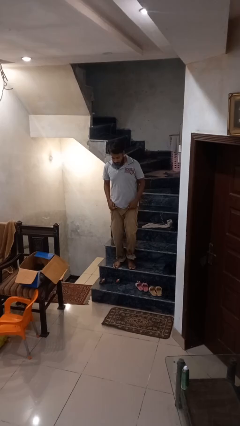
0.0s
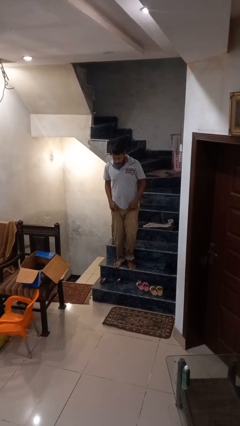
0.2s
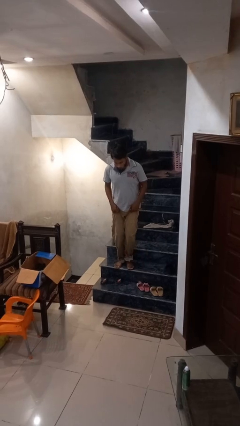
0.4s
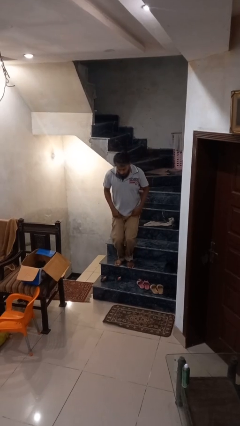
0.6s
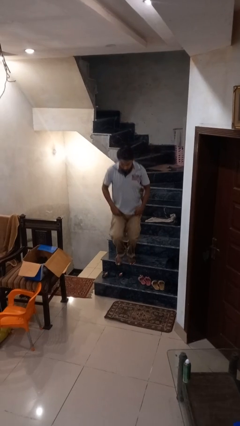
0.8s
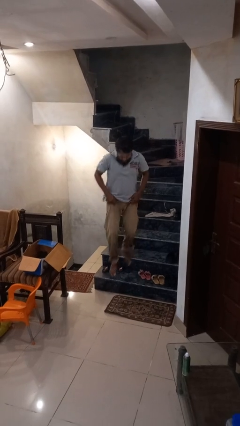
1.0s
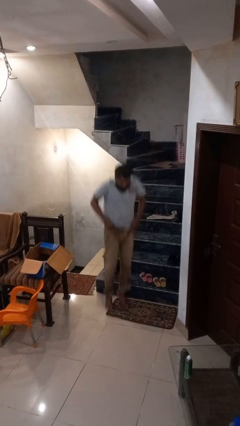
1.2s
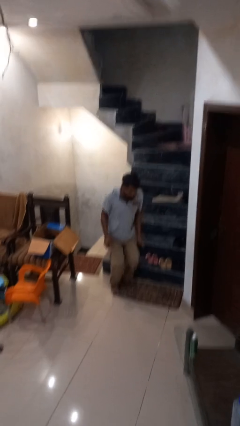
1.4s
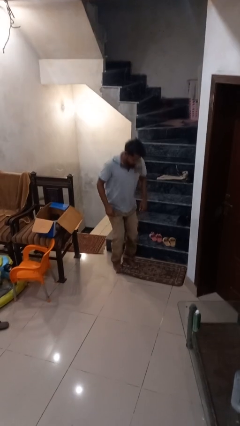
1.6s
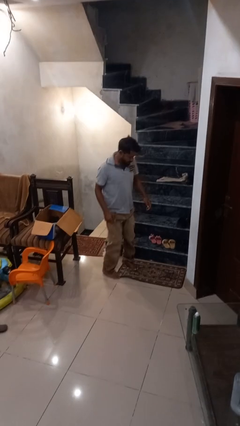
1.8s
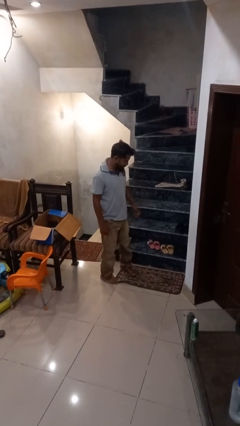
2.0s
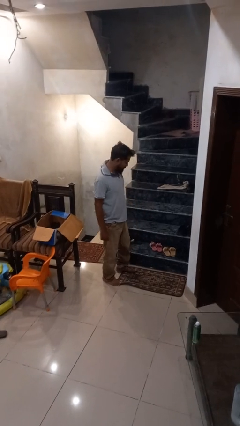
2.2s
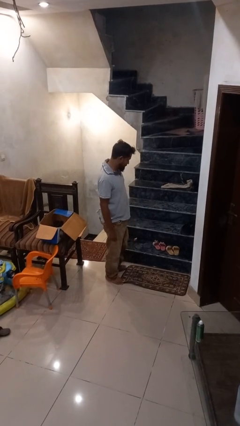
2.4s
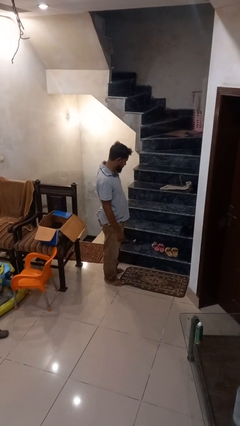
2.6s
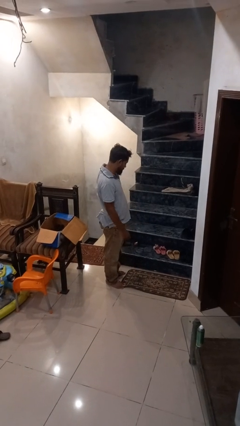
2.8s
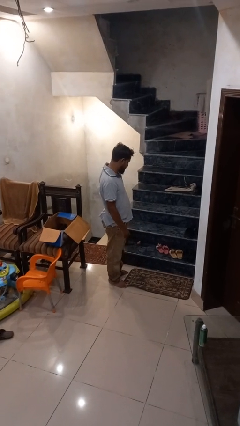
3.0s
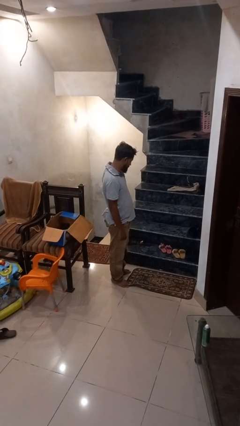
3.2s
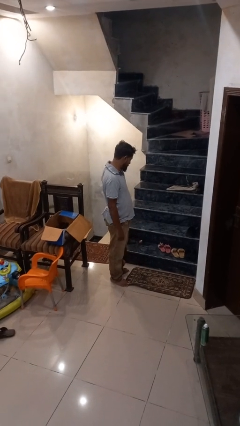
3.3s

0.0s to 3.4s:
person climbs down stairs

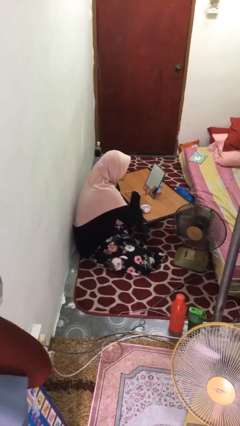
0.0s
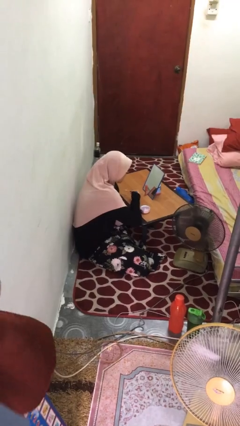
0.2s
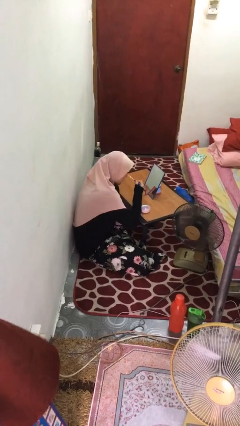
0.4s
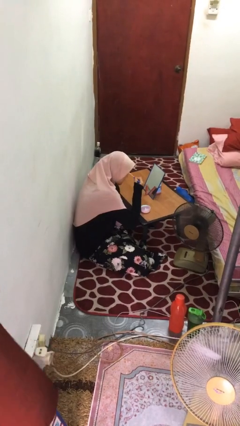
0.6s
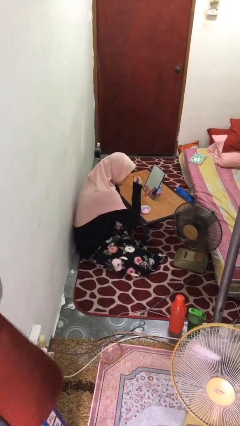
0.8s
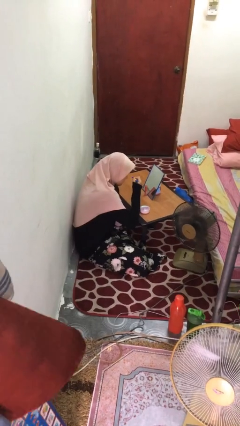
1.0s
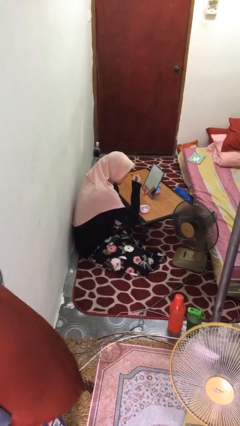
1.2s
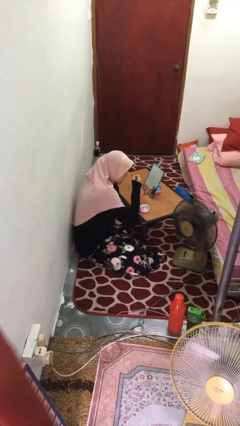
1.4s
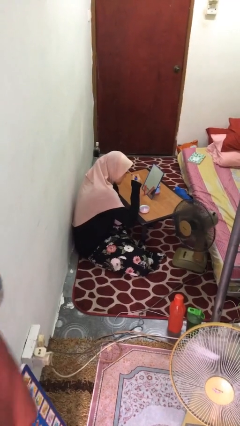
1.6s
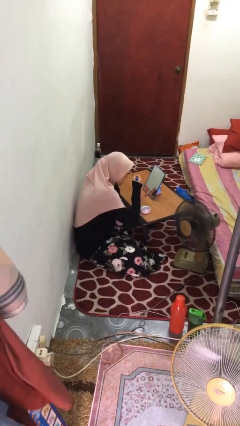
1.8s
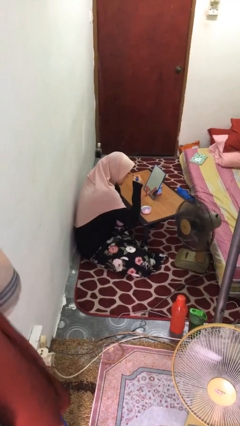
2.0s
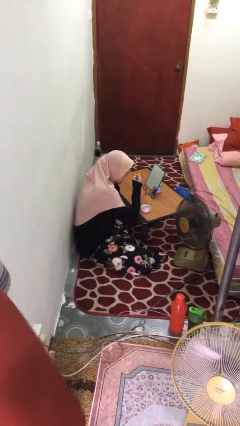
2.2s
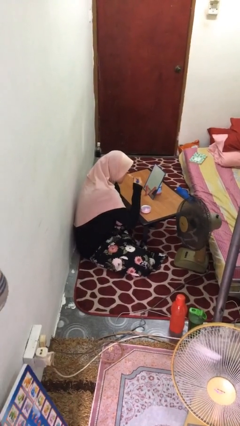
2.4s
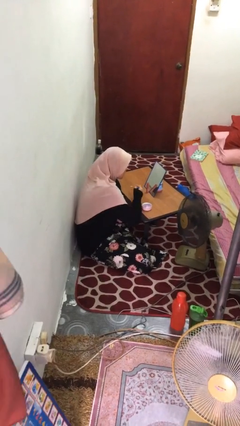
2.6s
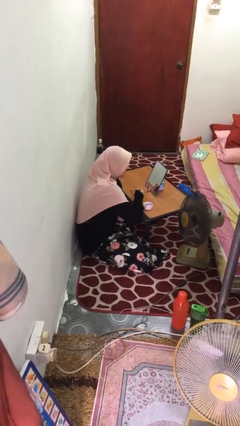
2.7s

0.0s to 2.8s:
person applies eye makeup

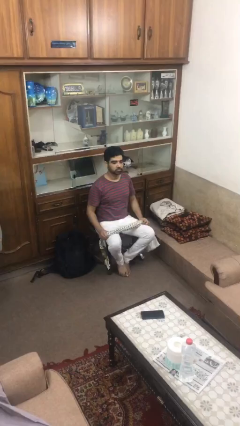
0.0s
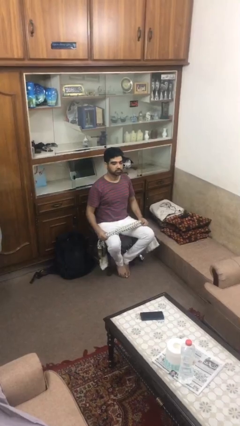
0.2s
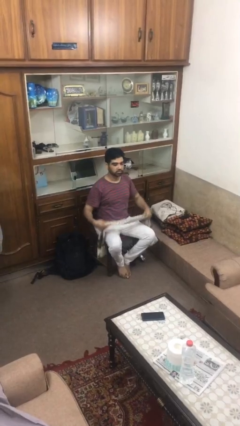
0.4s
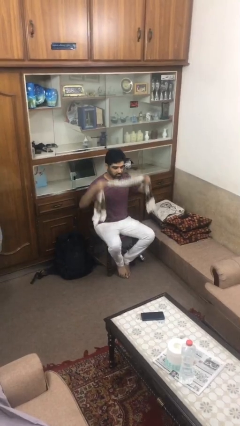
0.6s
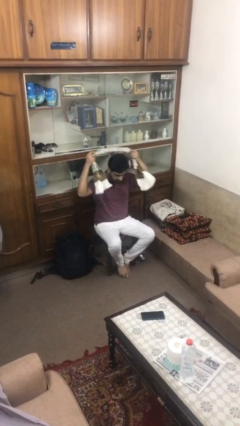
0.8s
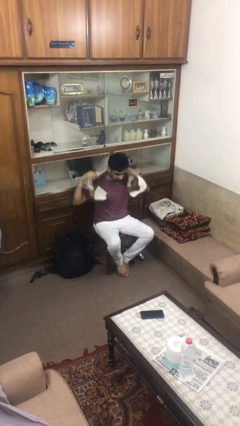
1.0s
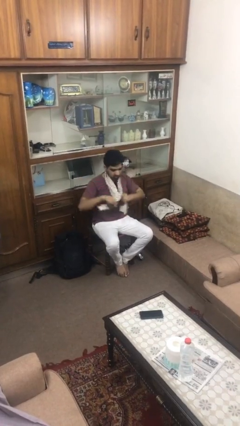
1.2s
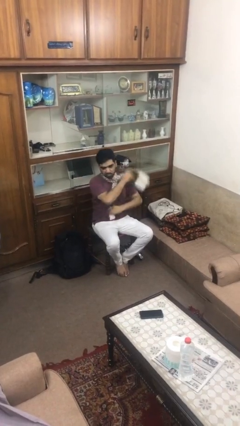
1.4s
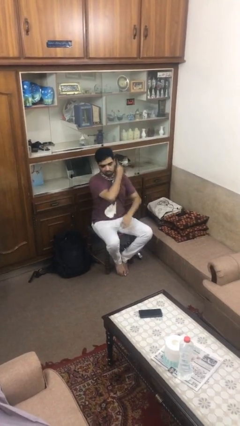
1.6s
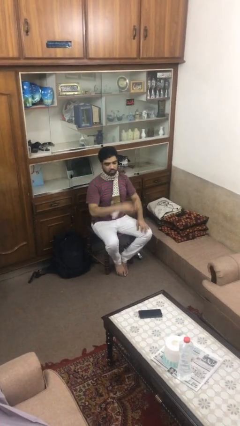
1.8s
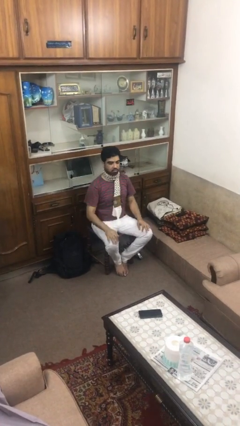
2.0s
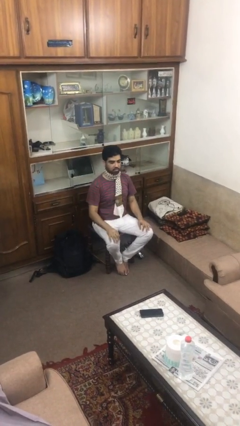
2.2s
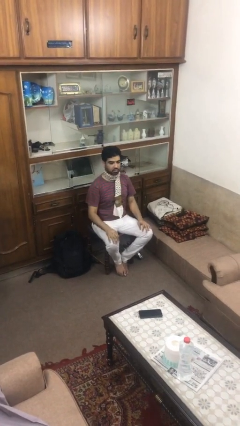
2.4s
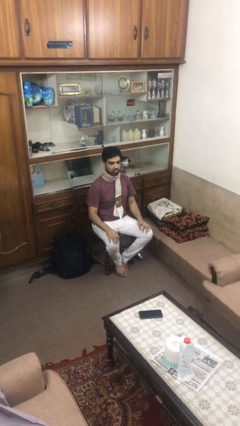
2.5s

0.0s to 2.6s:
person puts on scarf

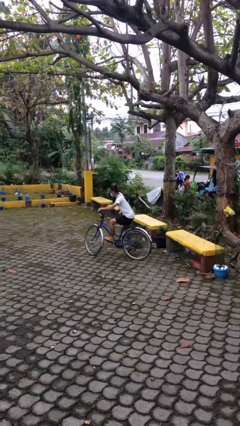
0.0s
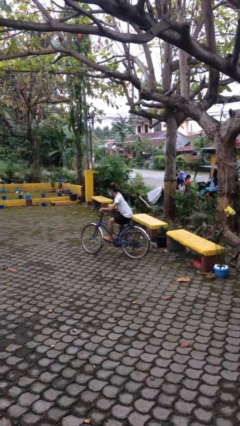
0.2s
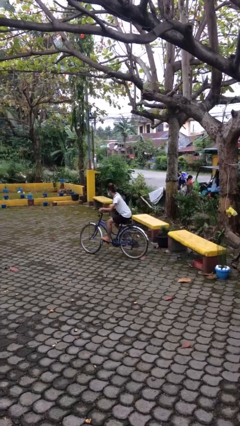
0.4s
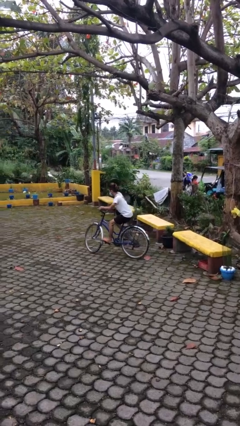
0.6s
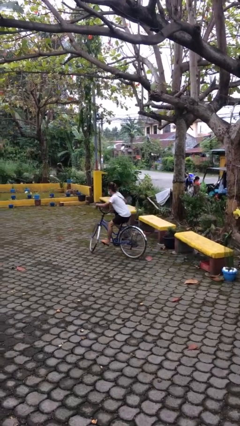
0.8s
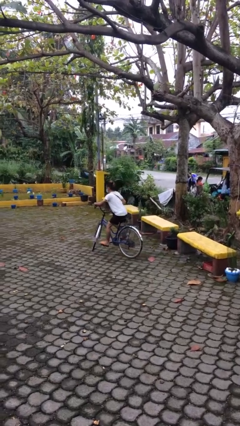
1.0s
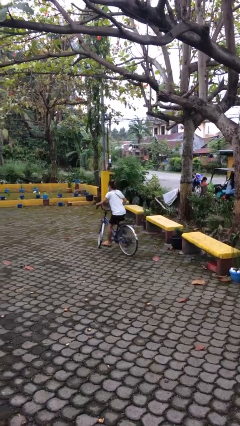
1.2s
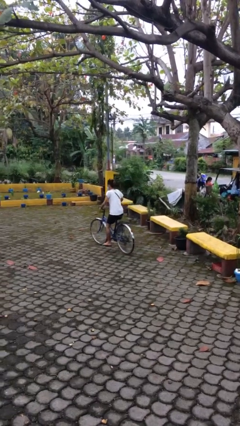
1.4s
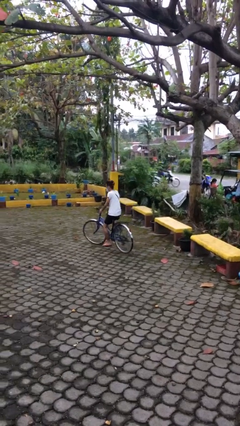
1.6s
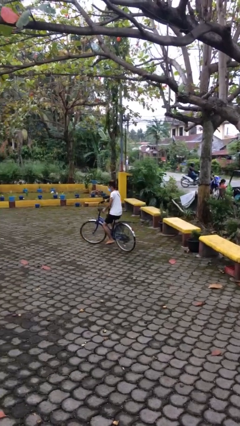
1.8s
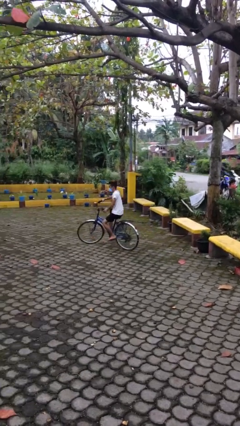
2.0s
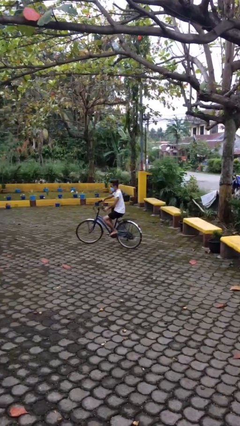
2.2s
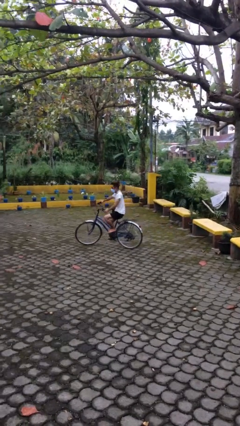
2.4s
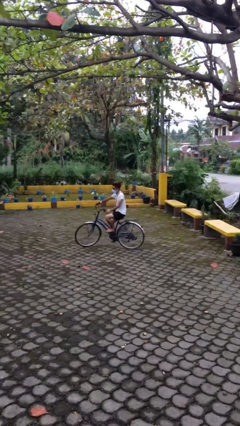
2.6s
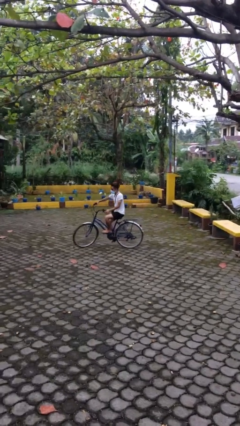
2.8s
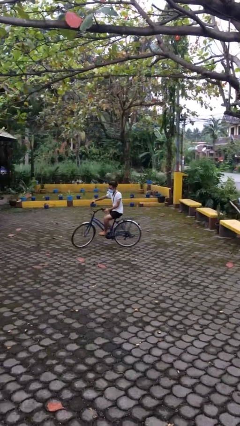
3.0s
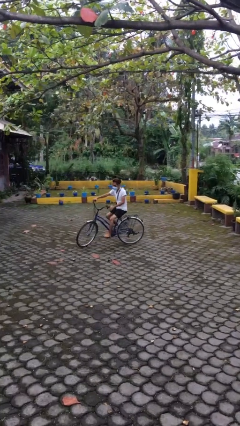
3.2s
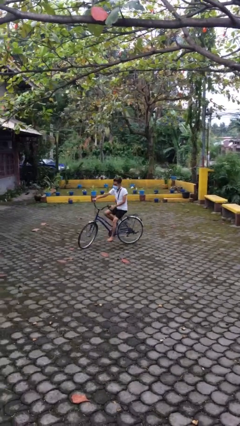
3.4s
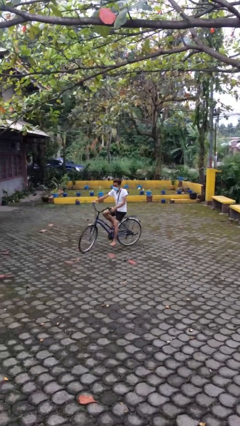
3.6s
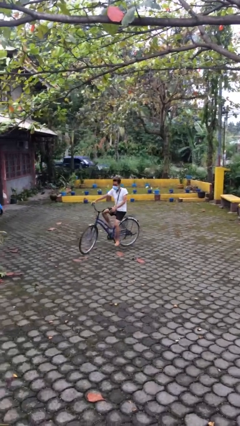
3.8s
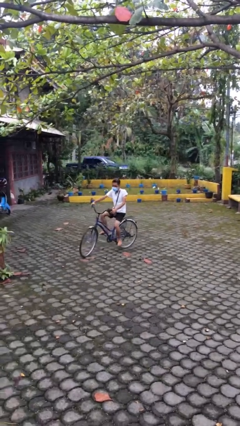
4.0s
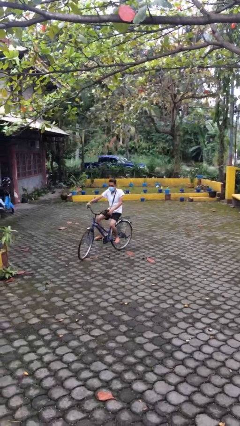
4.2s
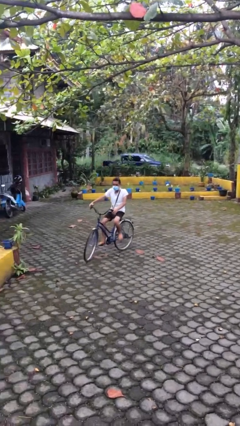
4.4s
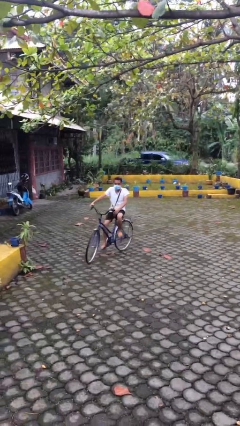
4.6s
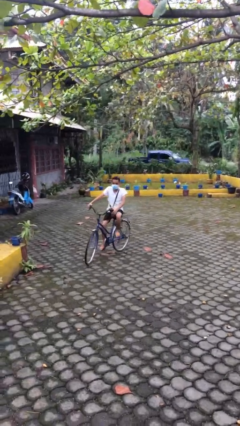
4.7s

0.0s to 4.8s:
person rides bicycle

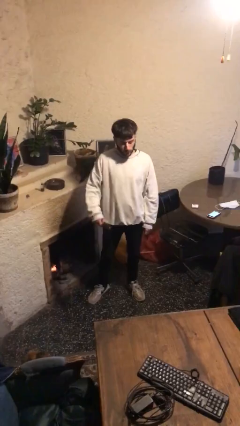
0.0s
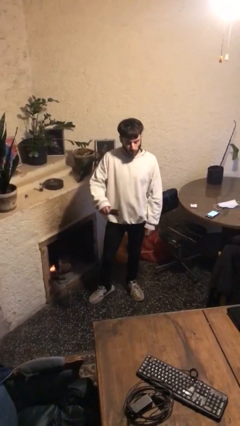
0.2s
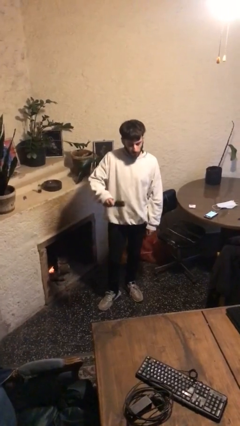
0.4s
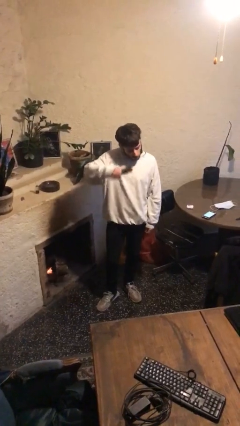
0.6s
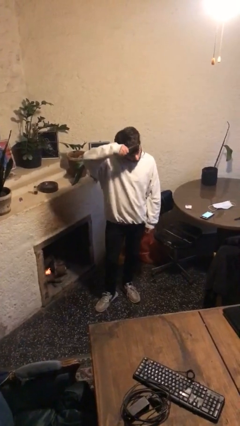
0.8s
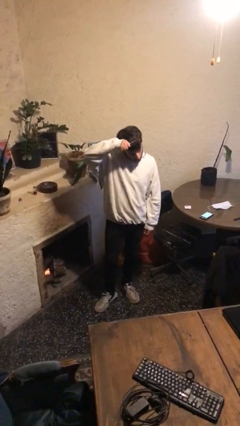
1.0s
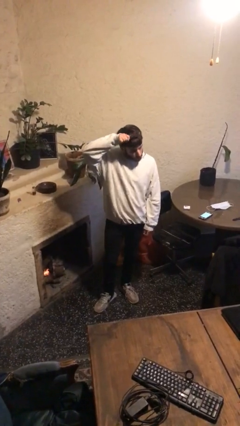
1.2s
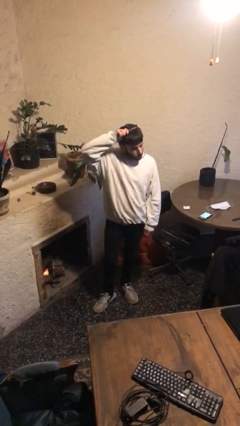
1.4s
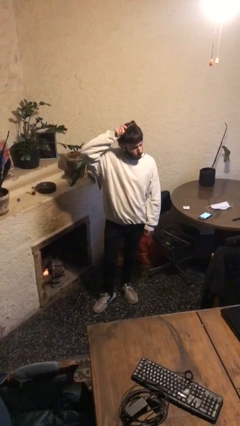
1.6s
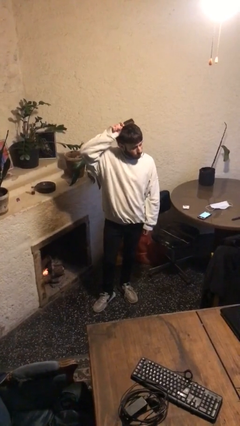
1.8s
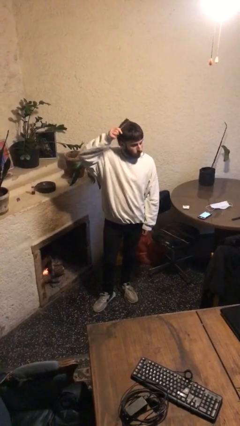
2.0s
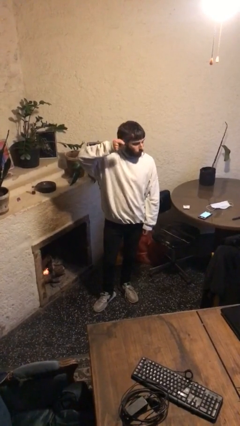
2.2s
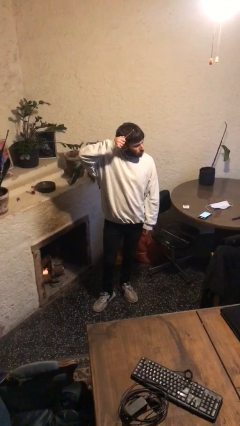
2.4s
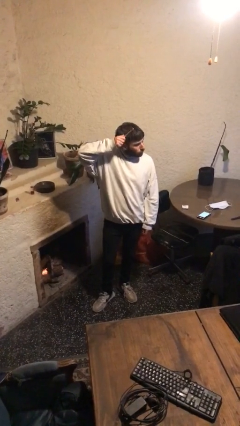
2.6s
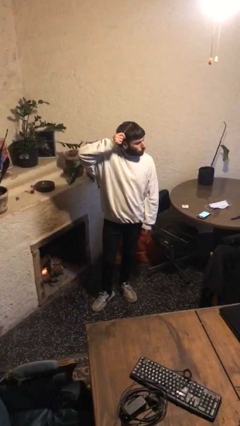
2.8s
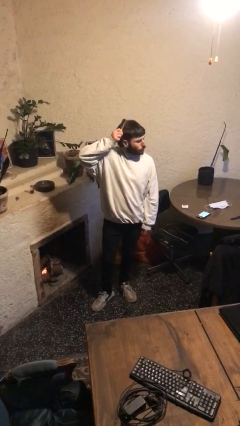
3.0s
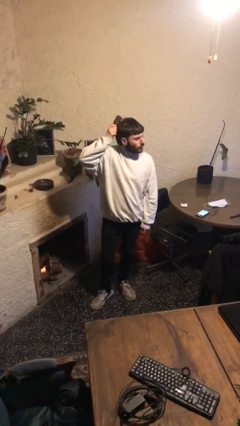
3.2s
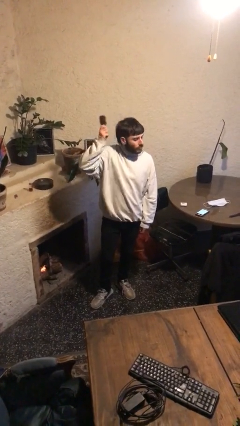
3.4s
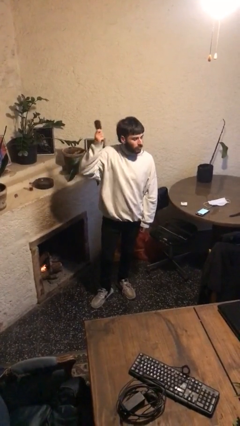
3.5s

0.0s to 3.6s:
person brushes hair

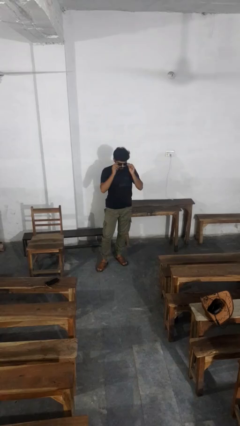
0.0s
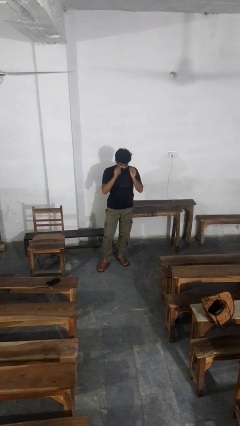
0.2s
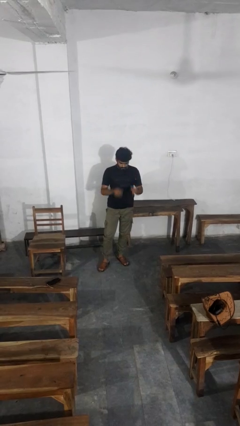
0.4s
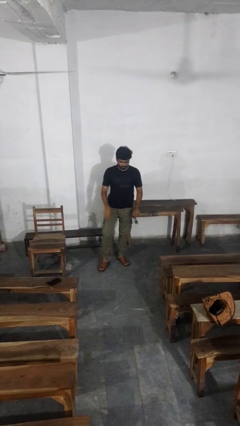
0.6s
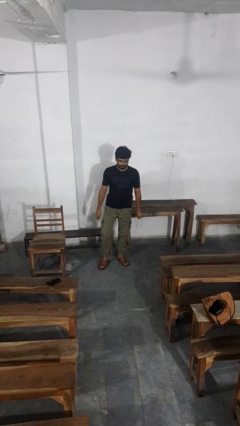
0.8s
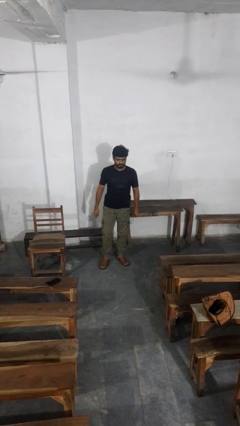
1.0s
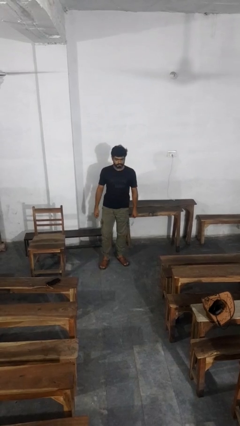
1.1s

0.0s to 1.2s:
person takes off sunglasses
